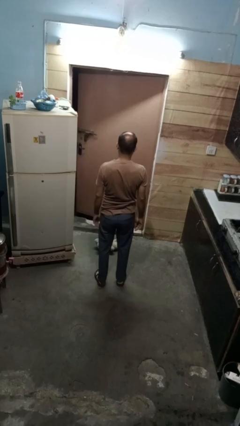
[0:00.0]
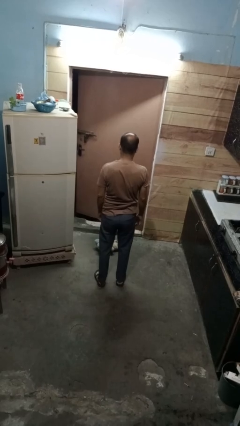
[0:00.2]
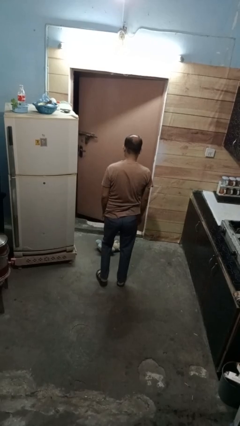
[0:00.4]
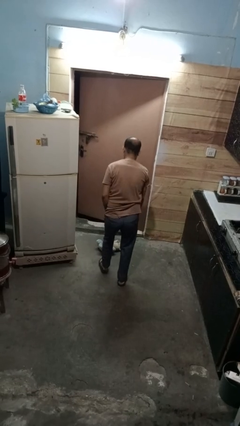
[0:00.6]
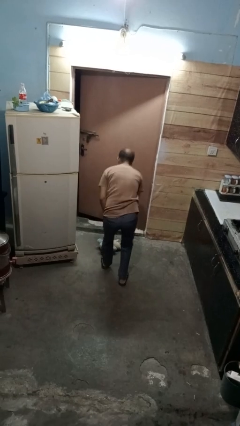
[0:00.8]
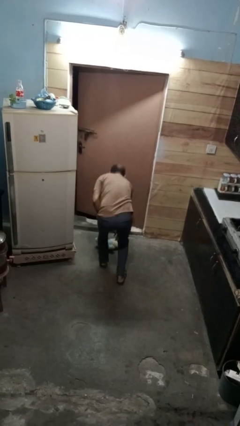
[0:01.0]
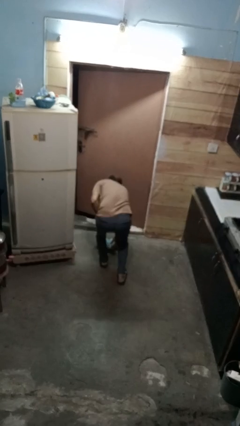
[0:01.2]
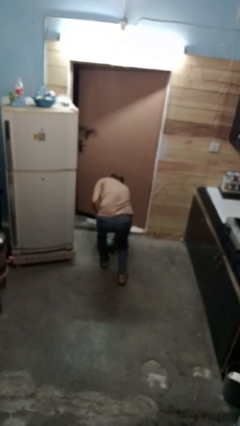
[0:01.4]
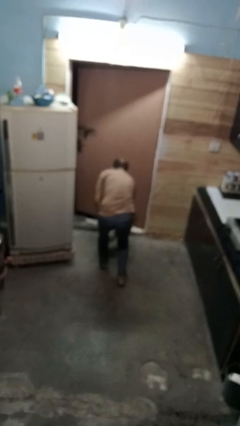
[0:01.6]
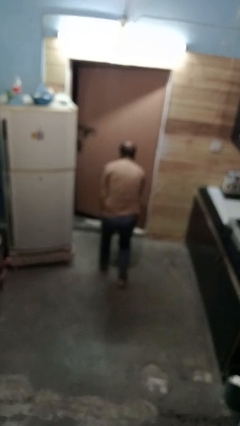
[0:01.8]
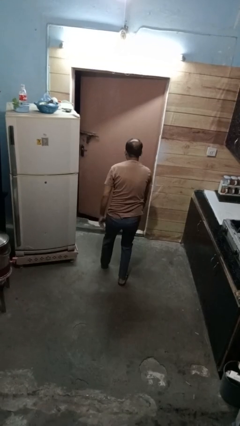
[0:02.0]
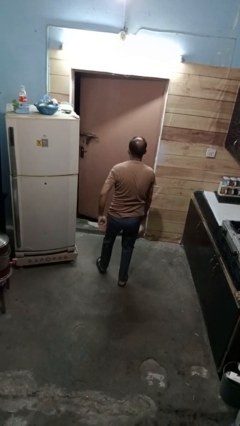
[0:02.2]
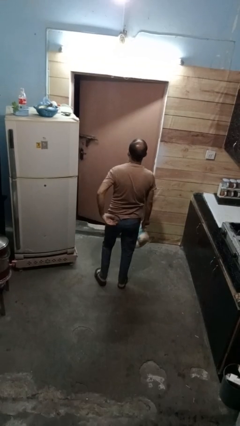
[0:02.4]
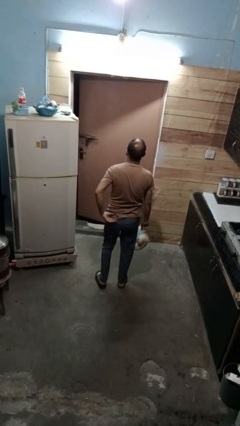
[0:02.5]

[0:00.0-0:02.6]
person picks up object from floor

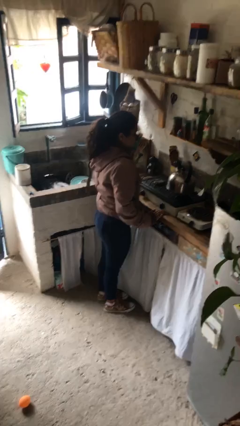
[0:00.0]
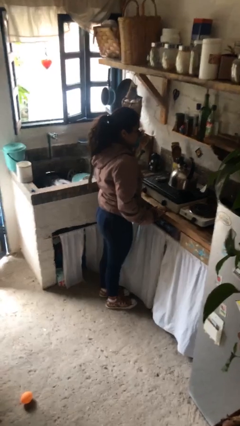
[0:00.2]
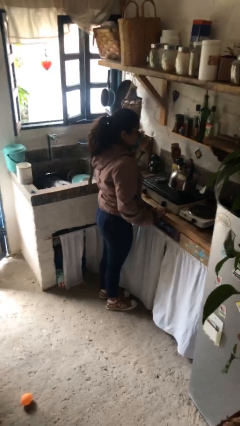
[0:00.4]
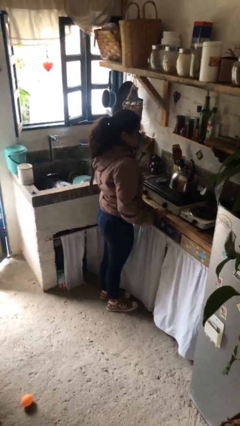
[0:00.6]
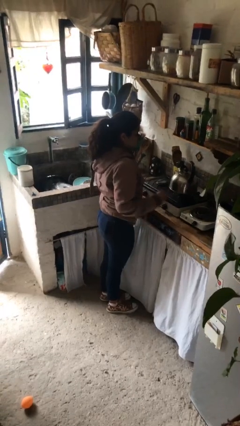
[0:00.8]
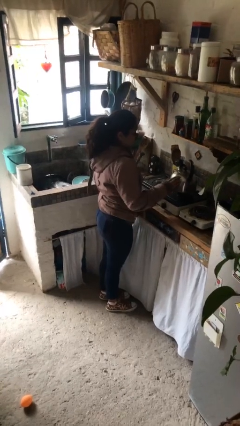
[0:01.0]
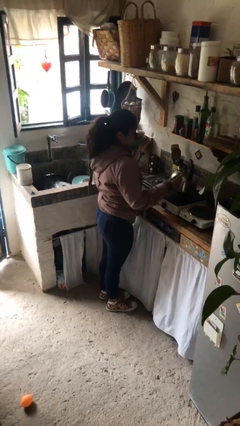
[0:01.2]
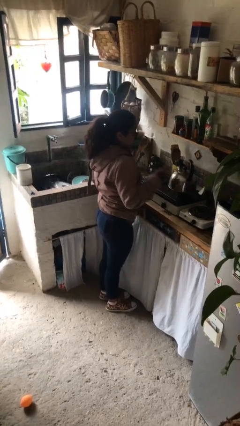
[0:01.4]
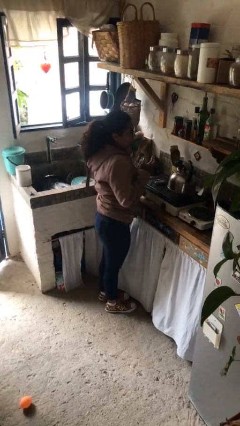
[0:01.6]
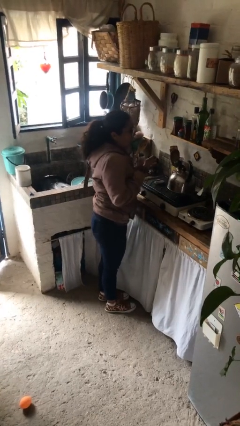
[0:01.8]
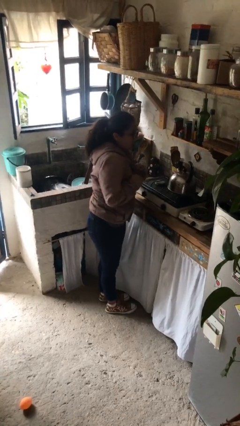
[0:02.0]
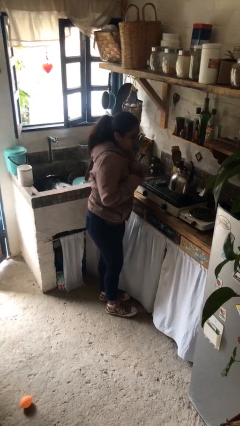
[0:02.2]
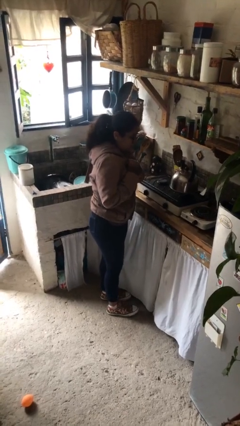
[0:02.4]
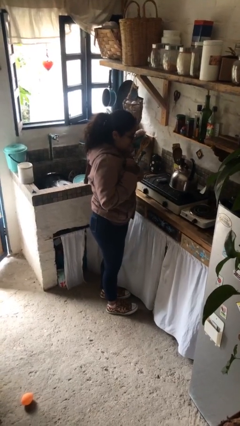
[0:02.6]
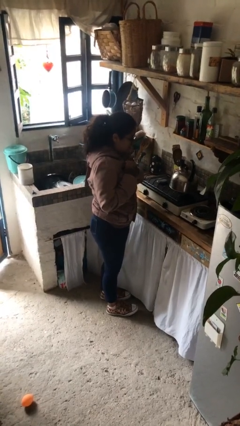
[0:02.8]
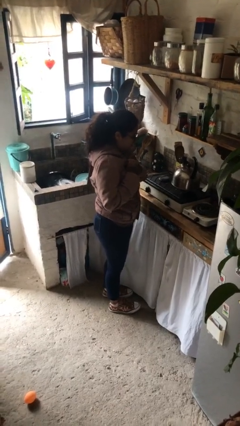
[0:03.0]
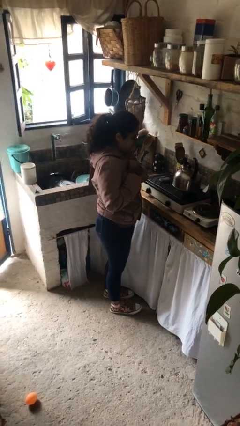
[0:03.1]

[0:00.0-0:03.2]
person burns hand

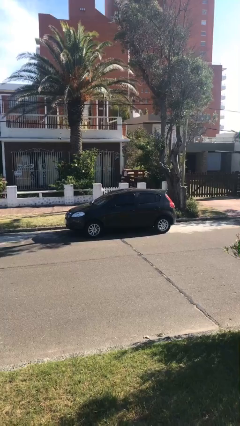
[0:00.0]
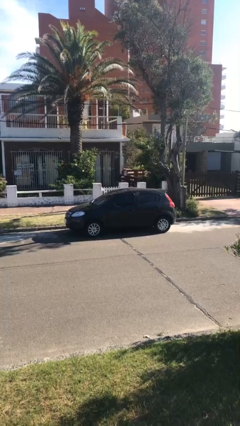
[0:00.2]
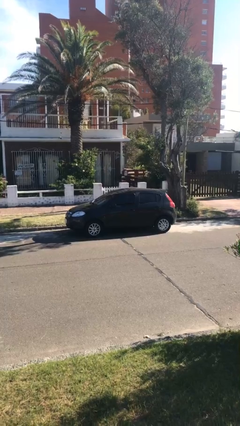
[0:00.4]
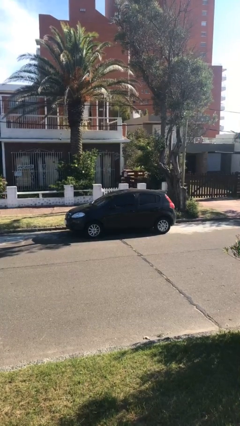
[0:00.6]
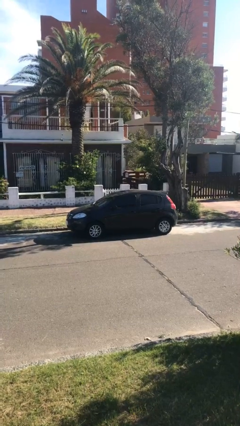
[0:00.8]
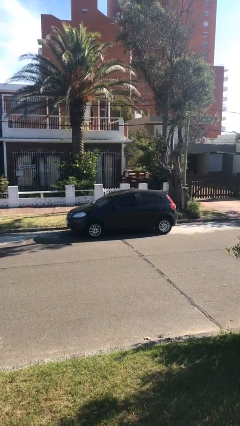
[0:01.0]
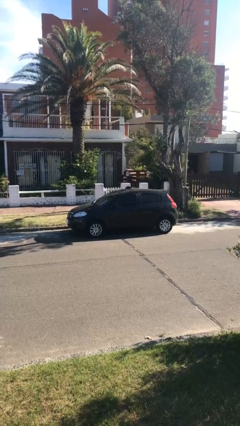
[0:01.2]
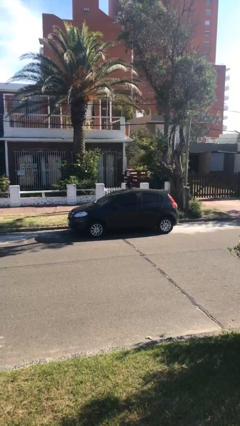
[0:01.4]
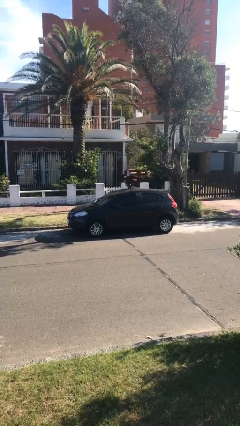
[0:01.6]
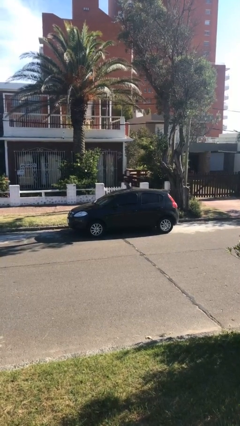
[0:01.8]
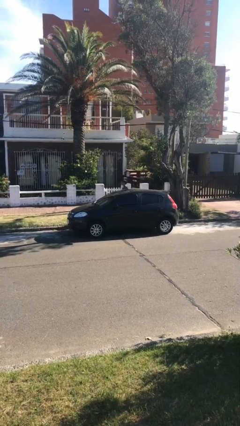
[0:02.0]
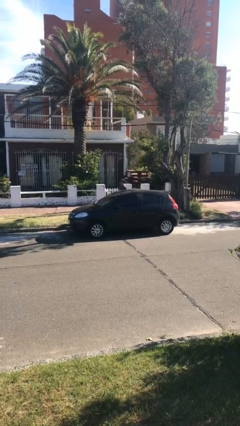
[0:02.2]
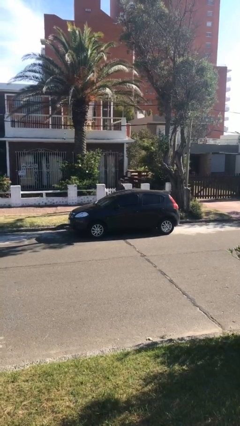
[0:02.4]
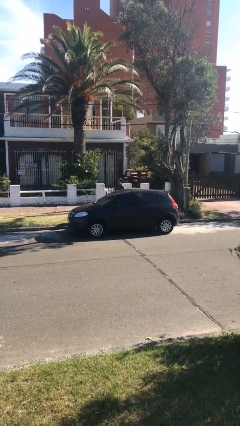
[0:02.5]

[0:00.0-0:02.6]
car drops off person

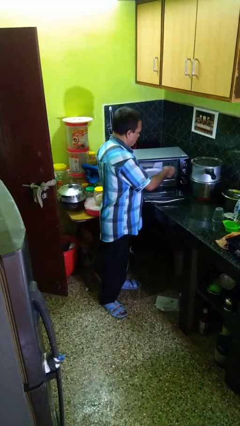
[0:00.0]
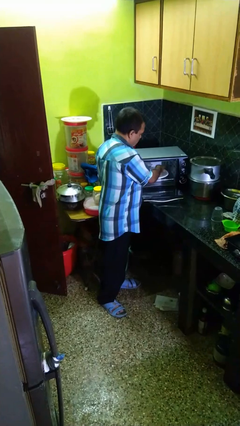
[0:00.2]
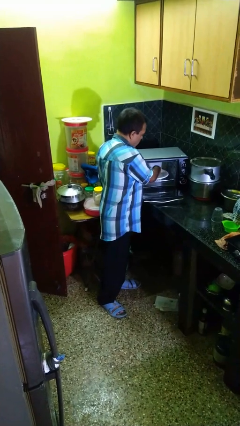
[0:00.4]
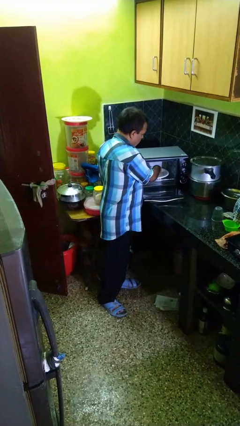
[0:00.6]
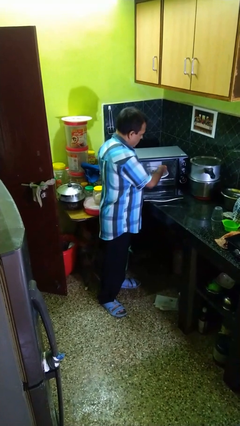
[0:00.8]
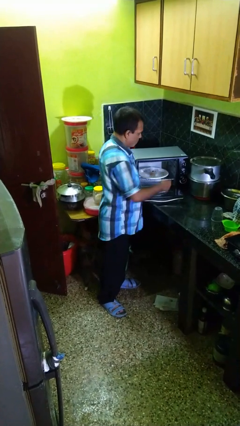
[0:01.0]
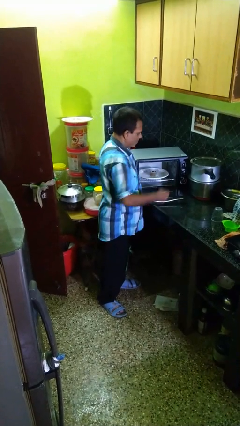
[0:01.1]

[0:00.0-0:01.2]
person puts object into microwave

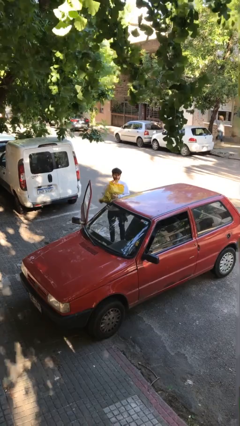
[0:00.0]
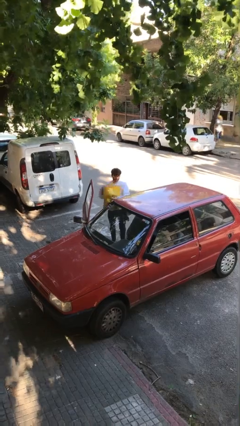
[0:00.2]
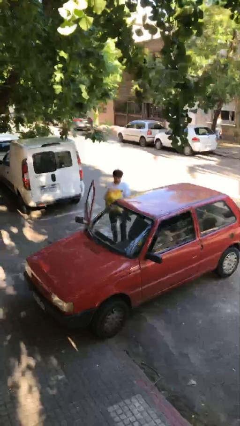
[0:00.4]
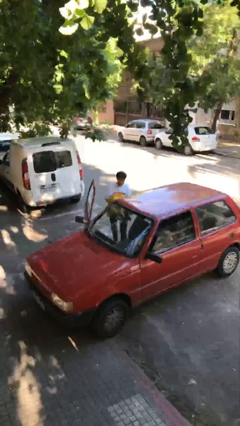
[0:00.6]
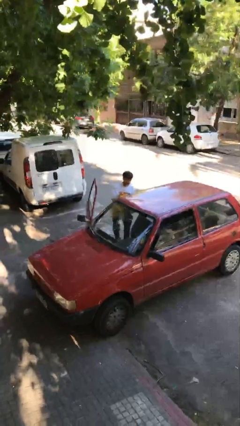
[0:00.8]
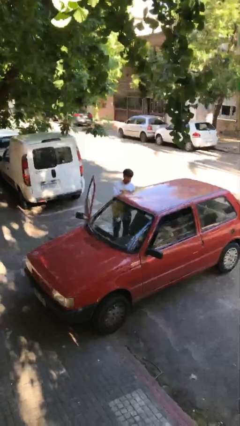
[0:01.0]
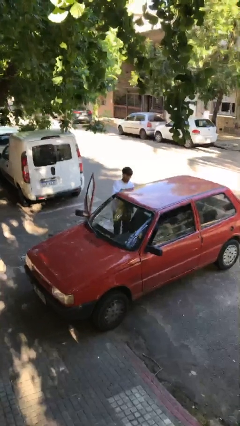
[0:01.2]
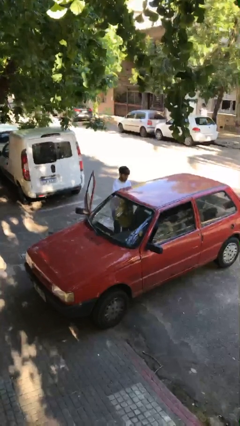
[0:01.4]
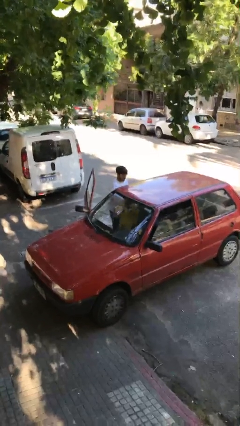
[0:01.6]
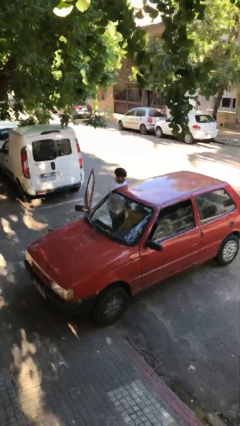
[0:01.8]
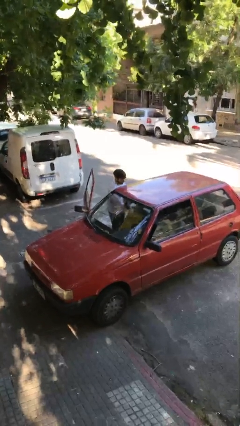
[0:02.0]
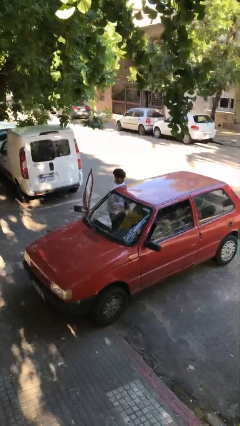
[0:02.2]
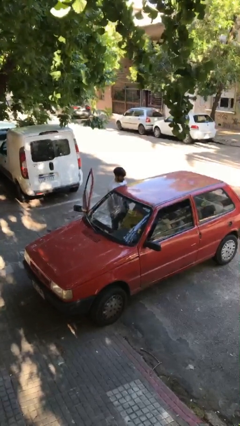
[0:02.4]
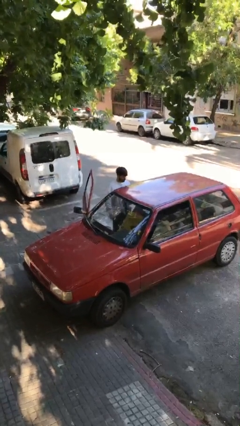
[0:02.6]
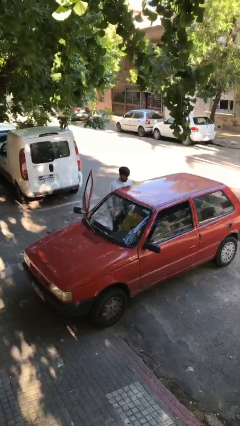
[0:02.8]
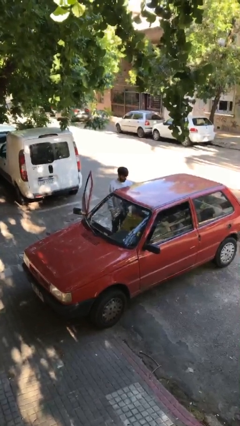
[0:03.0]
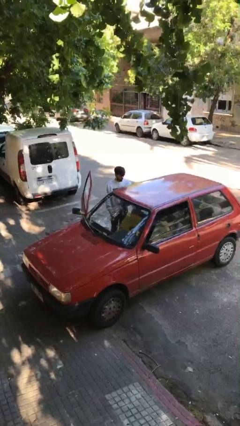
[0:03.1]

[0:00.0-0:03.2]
person loads car

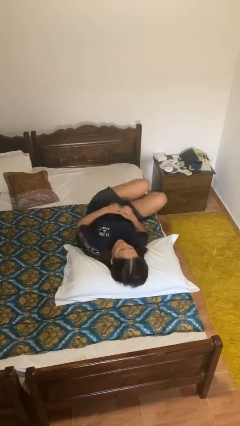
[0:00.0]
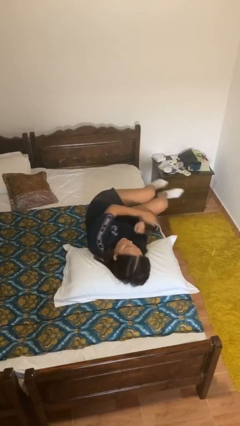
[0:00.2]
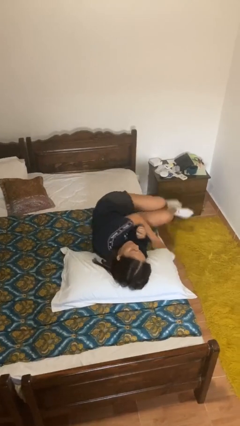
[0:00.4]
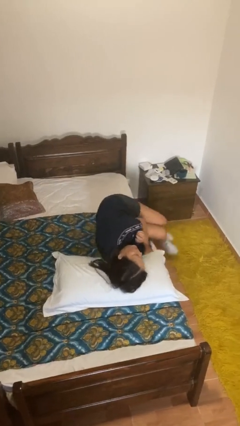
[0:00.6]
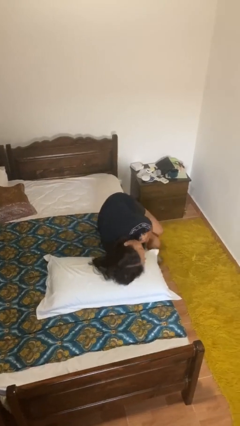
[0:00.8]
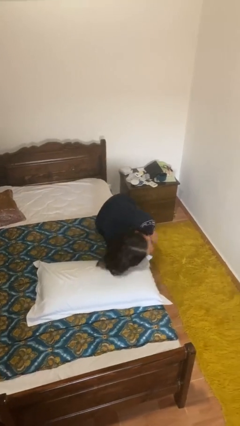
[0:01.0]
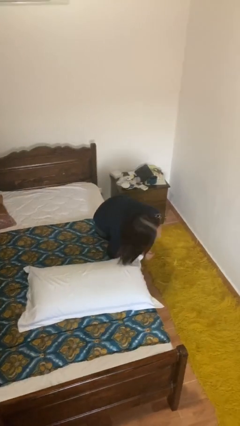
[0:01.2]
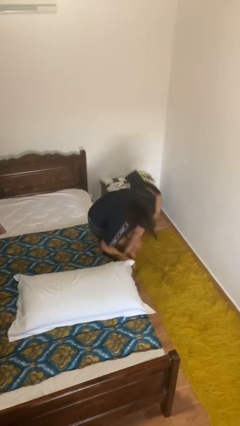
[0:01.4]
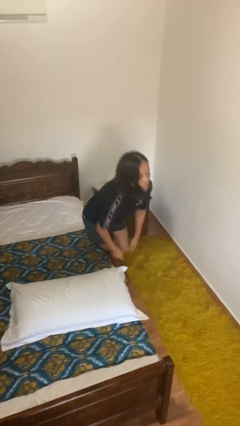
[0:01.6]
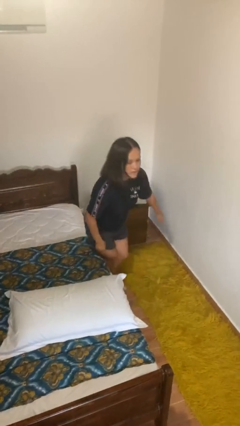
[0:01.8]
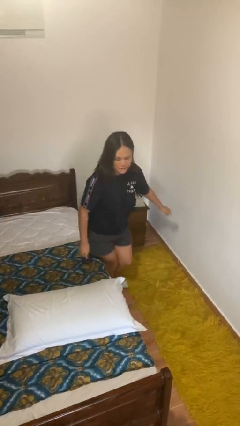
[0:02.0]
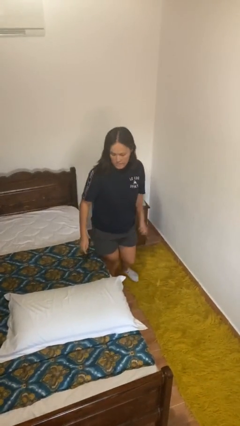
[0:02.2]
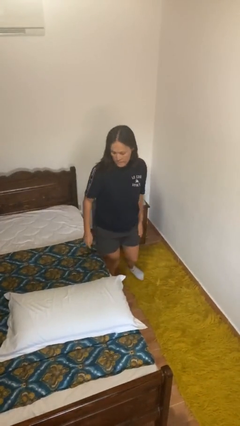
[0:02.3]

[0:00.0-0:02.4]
person stands up

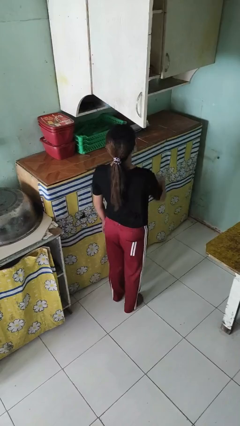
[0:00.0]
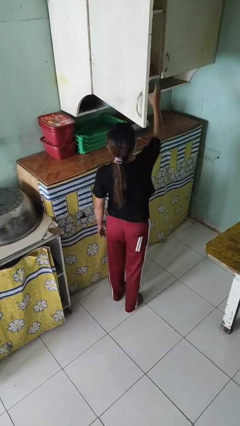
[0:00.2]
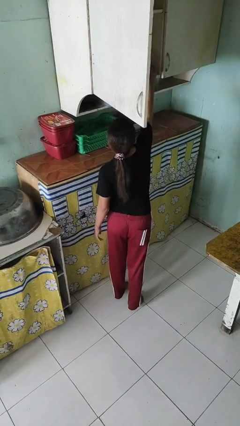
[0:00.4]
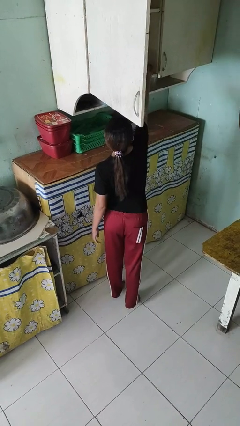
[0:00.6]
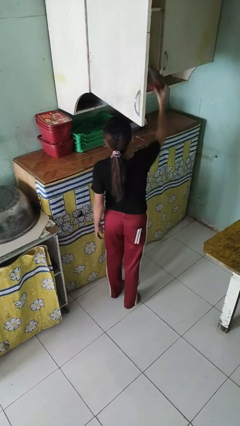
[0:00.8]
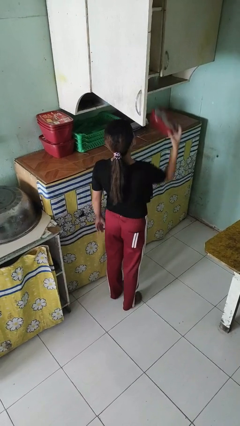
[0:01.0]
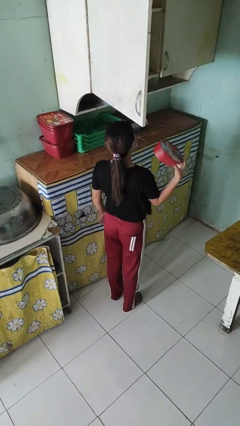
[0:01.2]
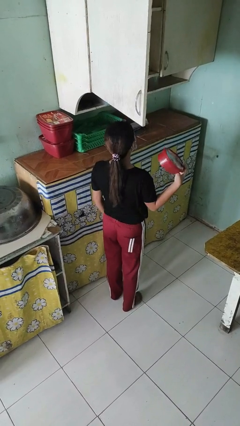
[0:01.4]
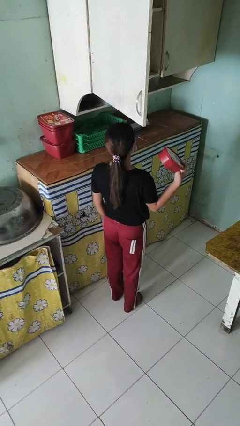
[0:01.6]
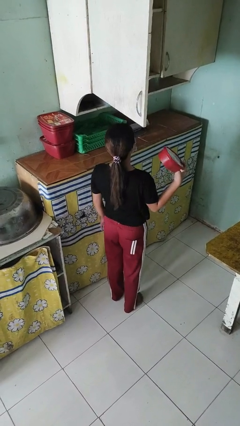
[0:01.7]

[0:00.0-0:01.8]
person takes object from cabinet
